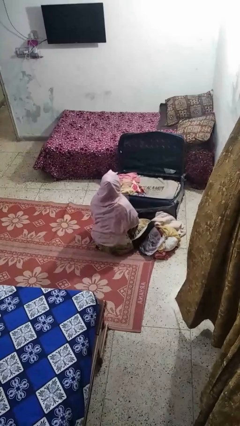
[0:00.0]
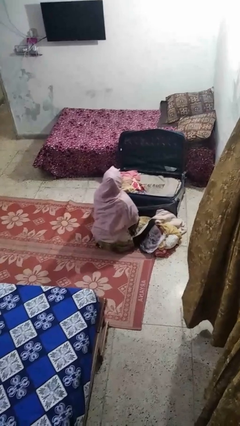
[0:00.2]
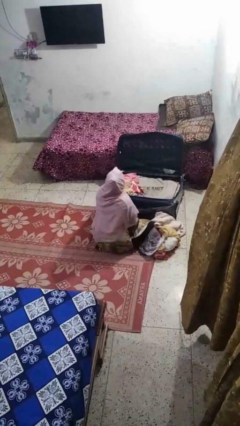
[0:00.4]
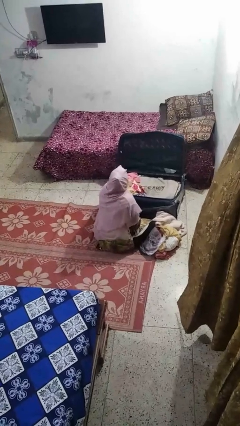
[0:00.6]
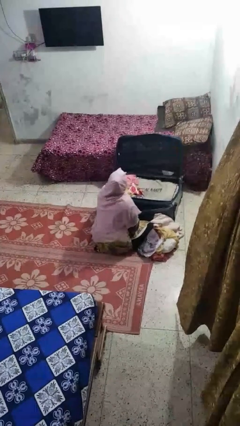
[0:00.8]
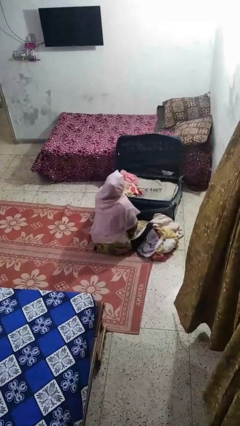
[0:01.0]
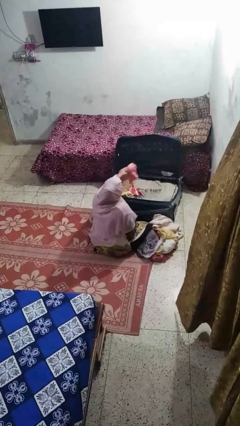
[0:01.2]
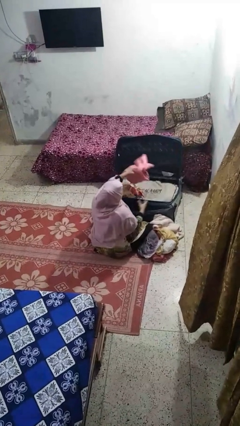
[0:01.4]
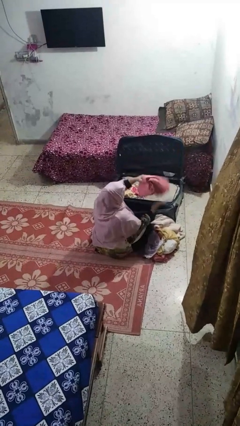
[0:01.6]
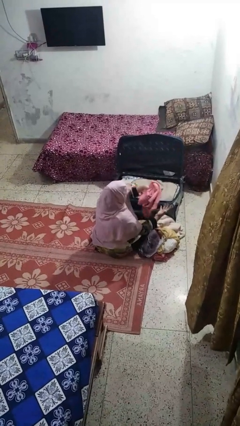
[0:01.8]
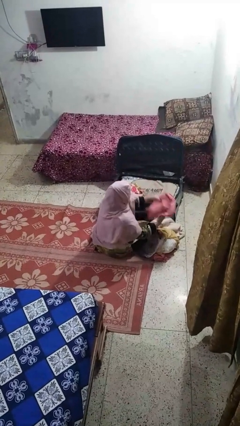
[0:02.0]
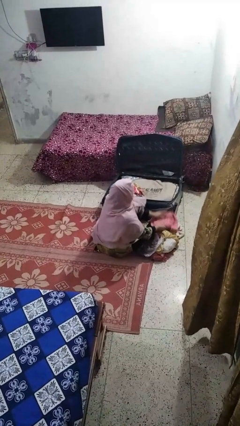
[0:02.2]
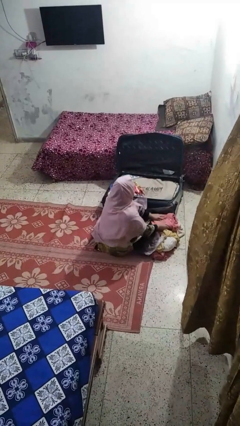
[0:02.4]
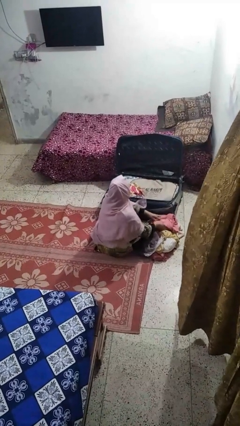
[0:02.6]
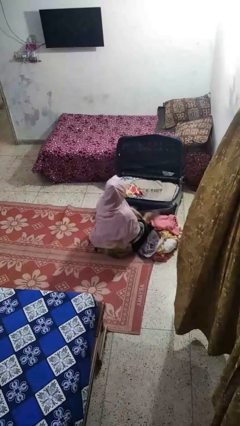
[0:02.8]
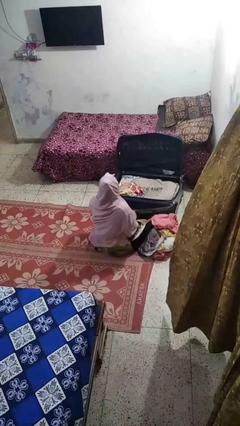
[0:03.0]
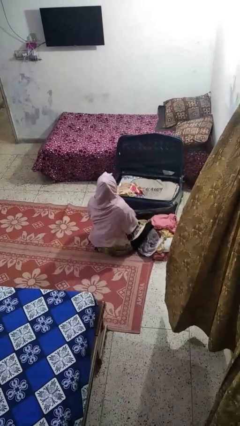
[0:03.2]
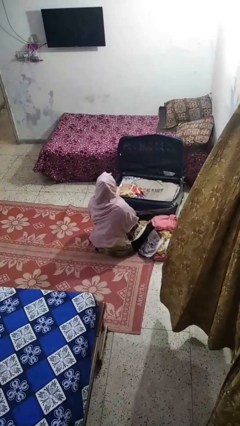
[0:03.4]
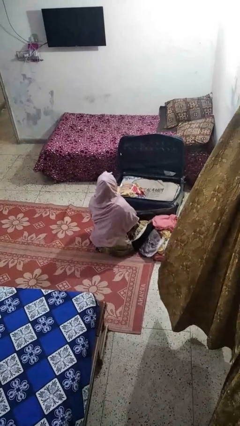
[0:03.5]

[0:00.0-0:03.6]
person unloads clothes from suitcase

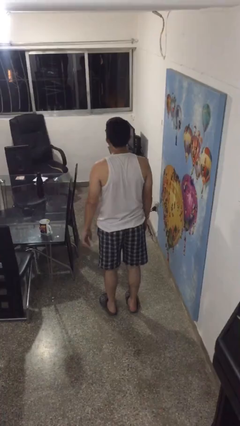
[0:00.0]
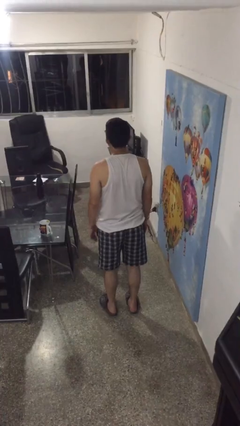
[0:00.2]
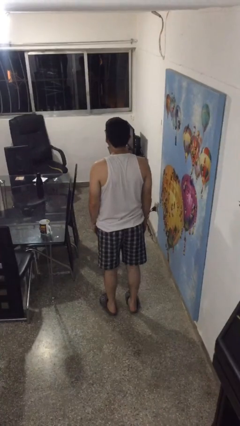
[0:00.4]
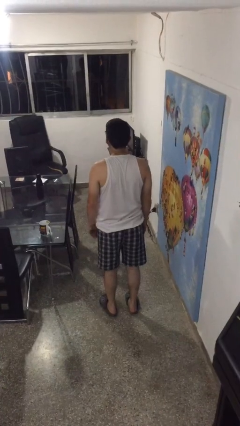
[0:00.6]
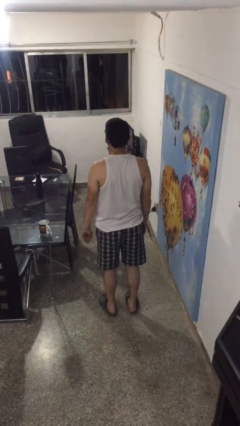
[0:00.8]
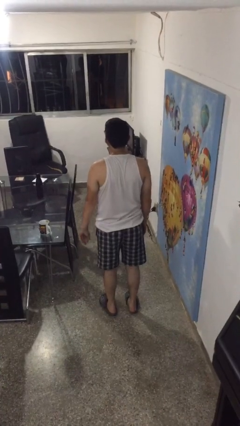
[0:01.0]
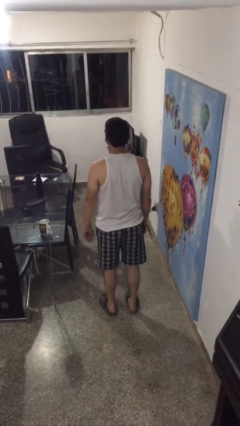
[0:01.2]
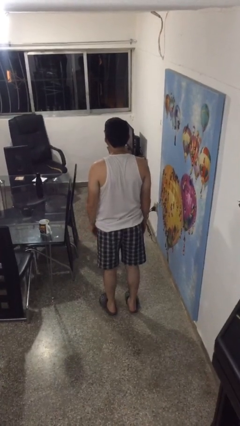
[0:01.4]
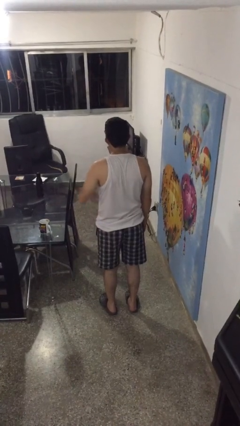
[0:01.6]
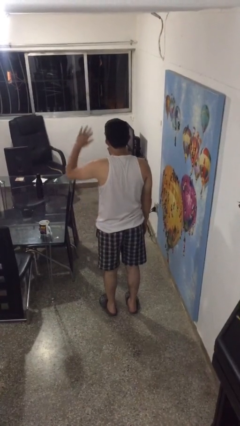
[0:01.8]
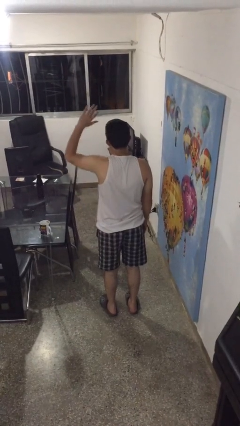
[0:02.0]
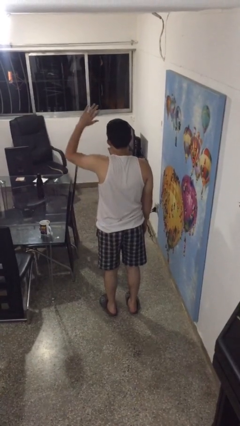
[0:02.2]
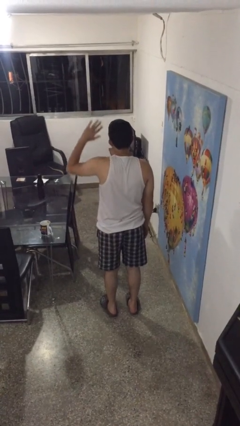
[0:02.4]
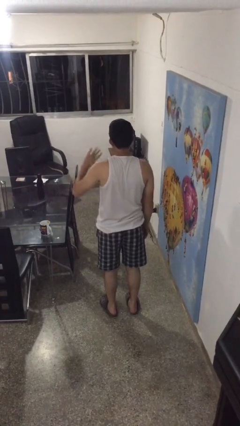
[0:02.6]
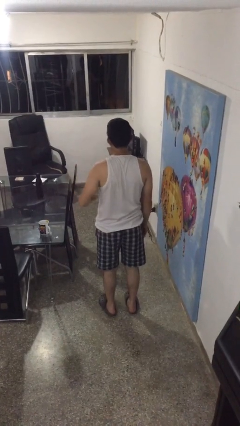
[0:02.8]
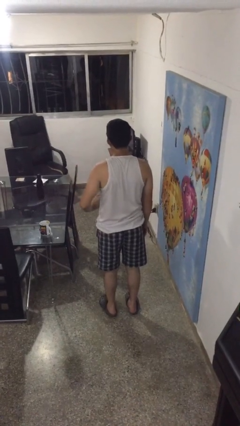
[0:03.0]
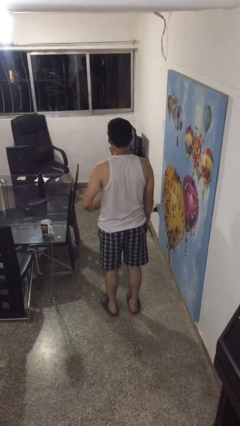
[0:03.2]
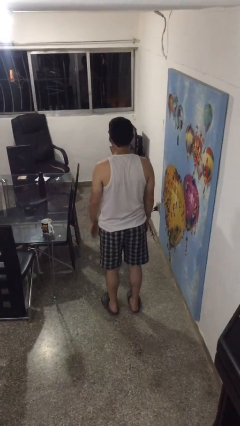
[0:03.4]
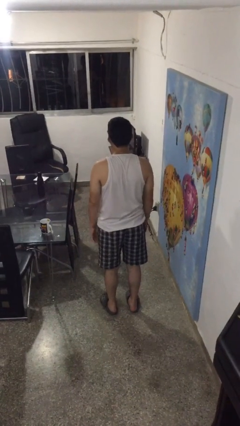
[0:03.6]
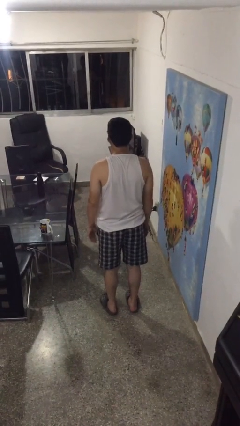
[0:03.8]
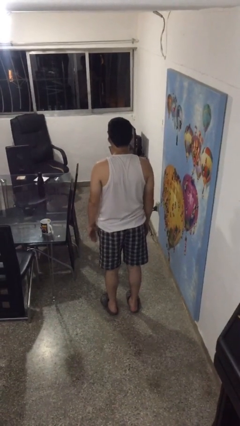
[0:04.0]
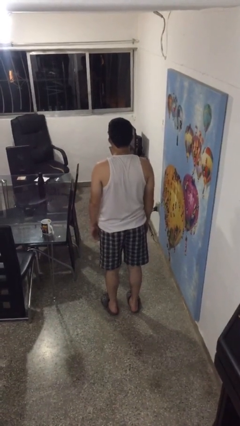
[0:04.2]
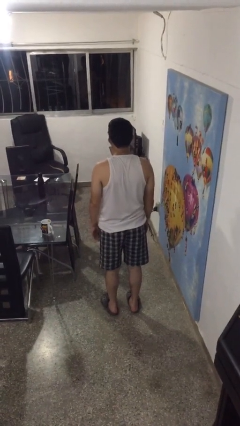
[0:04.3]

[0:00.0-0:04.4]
person gestures swipe down

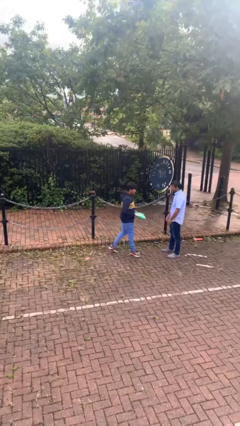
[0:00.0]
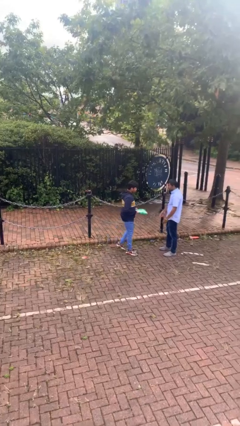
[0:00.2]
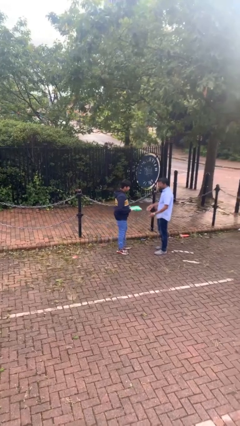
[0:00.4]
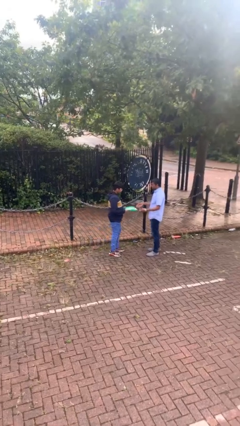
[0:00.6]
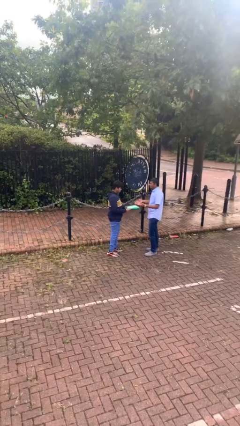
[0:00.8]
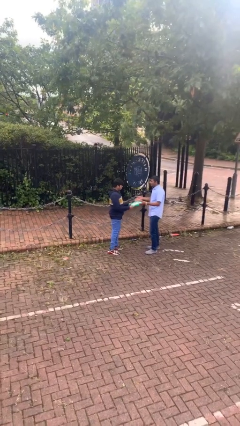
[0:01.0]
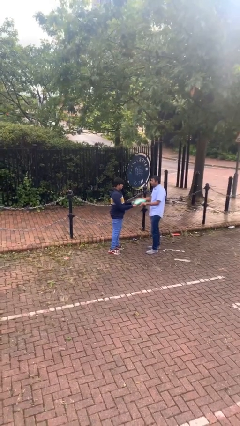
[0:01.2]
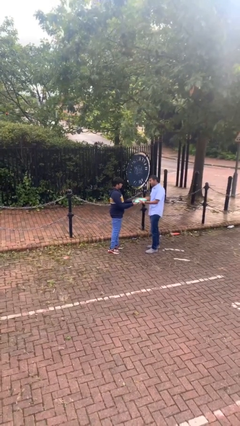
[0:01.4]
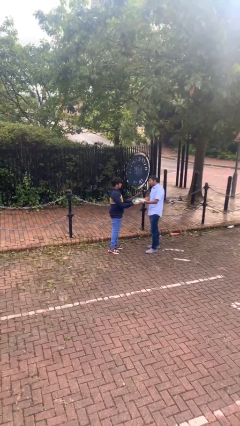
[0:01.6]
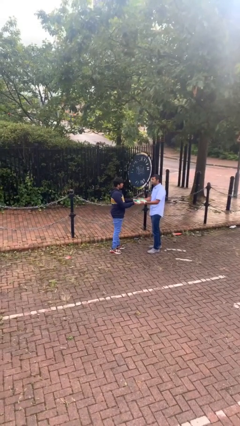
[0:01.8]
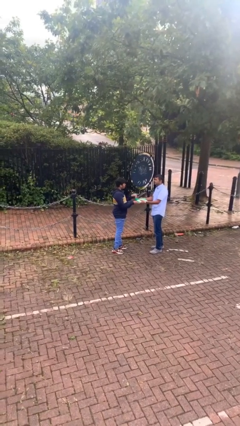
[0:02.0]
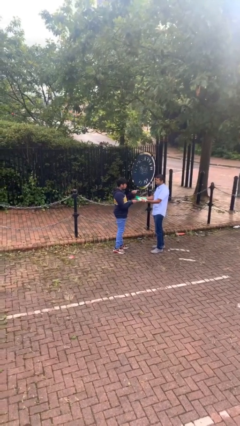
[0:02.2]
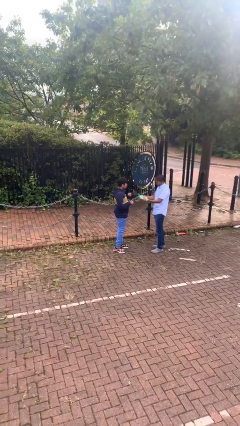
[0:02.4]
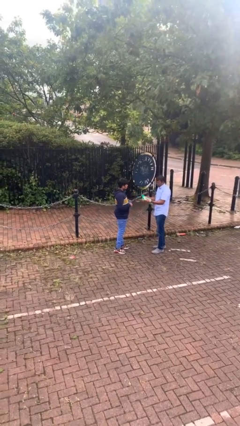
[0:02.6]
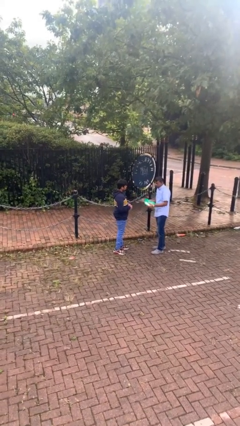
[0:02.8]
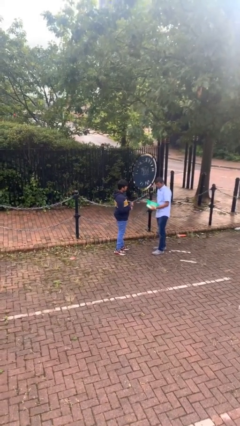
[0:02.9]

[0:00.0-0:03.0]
person transfers object to person

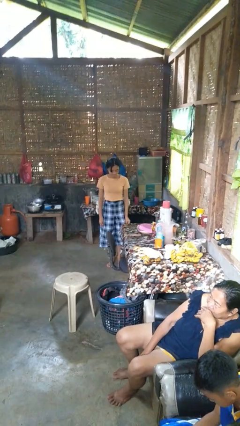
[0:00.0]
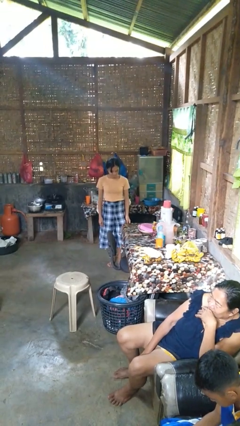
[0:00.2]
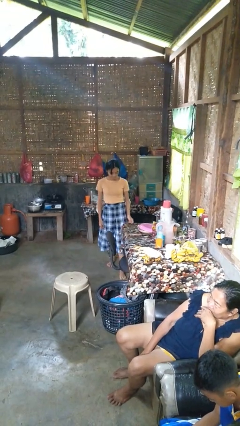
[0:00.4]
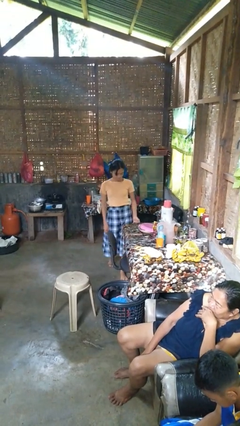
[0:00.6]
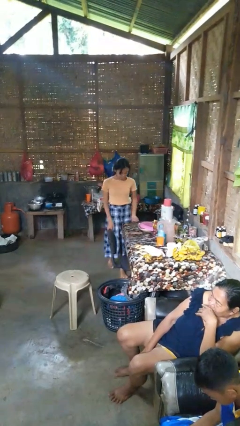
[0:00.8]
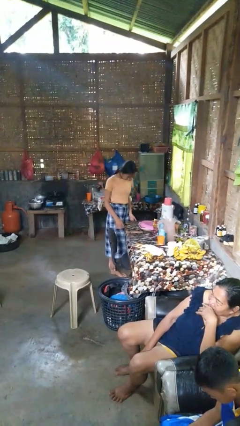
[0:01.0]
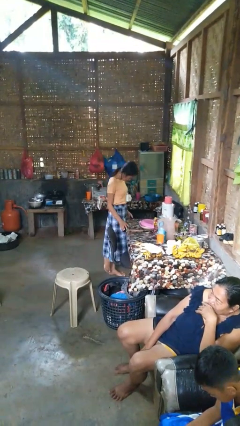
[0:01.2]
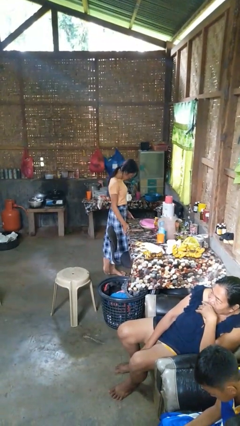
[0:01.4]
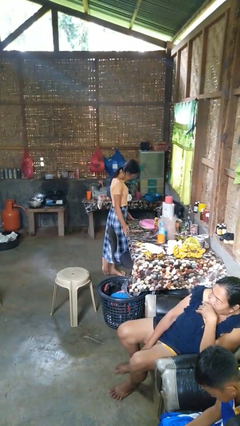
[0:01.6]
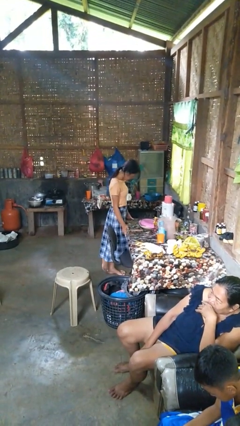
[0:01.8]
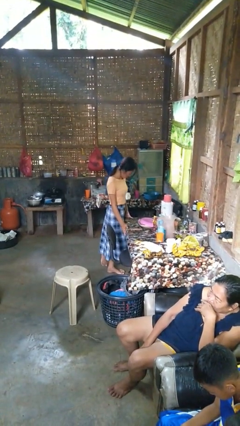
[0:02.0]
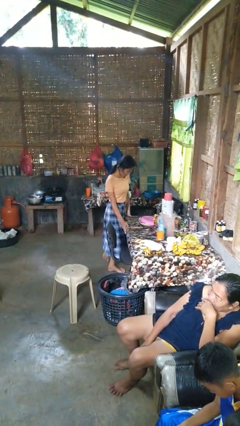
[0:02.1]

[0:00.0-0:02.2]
person bumps into table

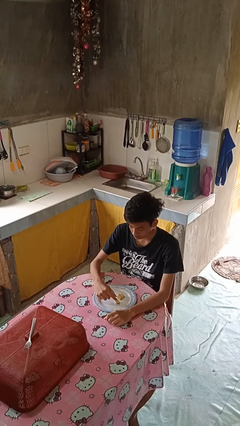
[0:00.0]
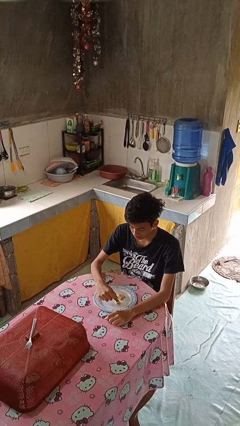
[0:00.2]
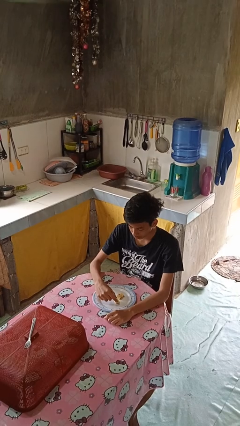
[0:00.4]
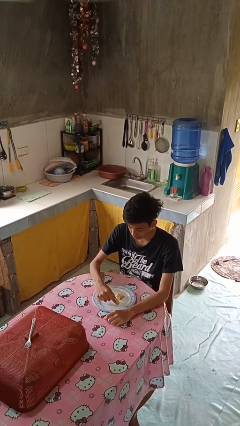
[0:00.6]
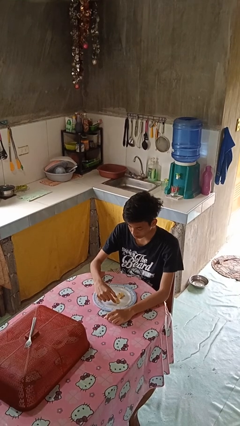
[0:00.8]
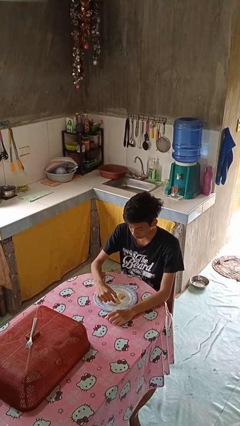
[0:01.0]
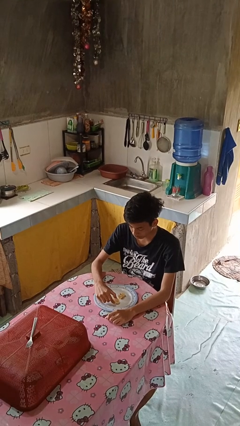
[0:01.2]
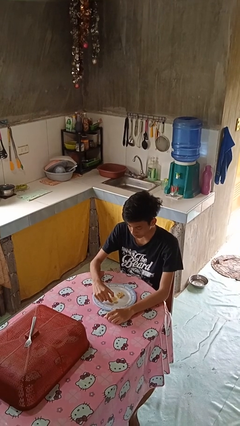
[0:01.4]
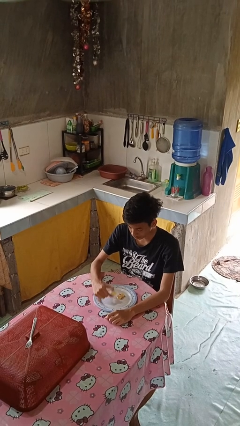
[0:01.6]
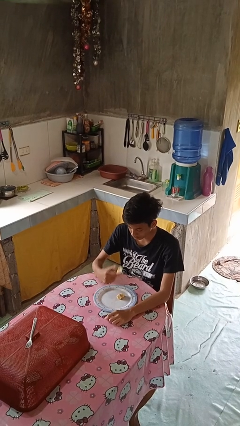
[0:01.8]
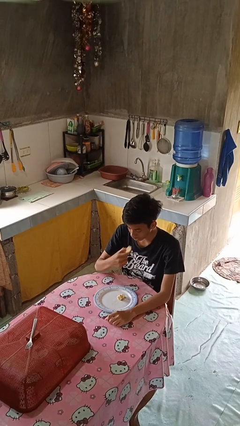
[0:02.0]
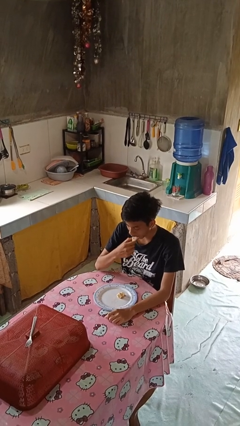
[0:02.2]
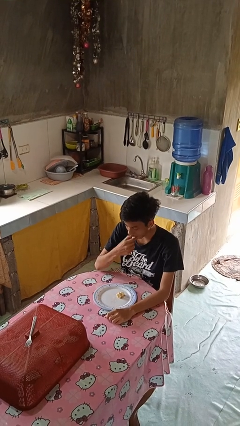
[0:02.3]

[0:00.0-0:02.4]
person eats with hands

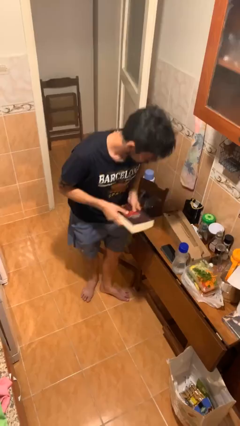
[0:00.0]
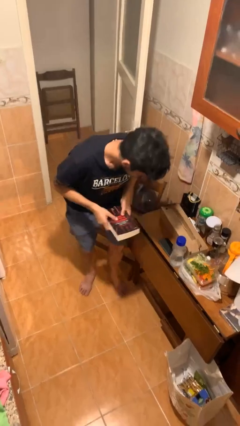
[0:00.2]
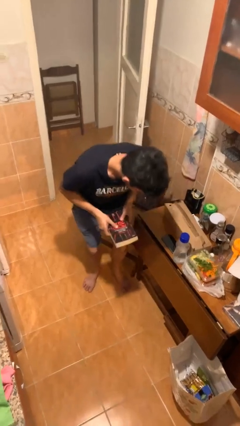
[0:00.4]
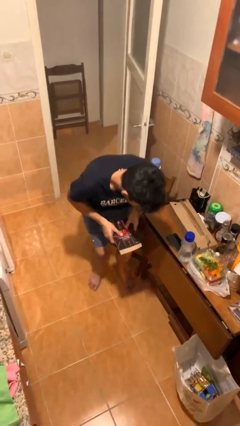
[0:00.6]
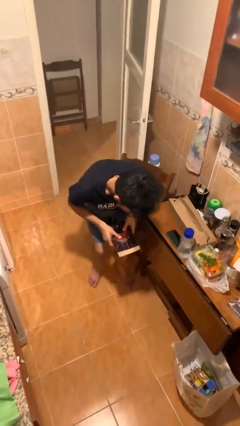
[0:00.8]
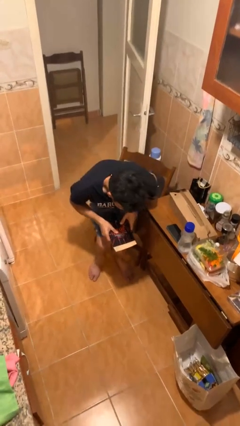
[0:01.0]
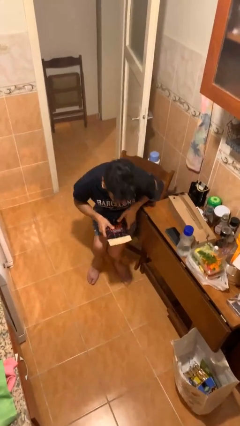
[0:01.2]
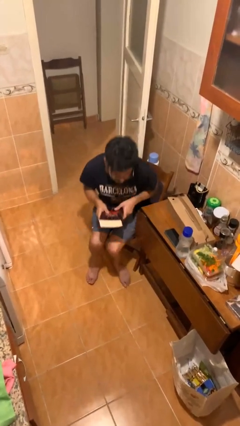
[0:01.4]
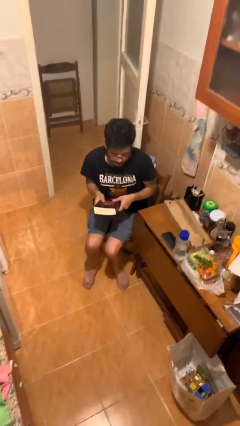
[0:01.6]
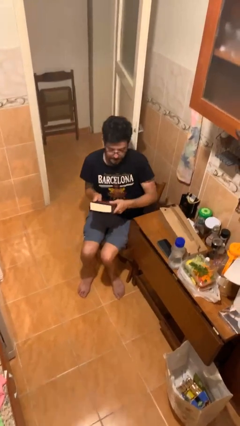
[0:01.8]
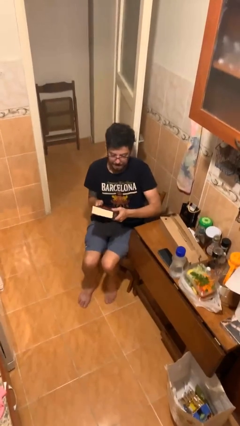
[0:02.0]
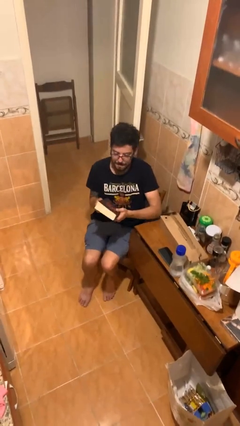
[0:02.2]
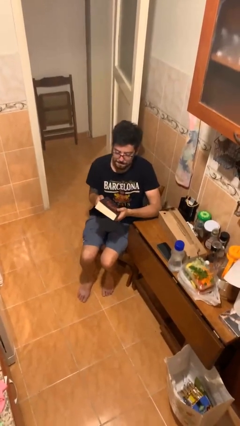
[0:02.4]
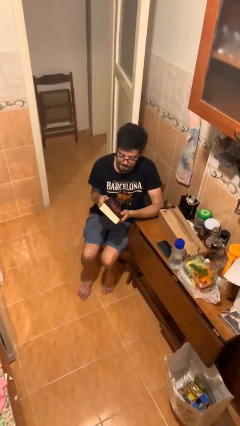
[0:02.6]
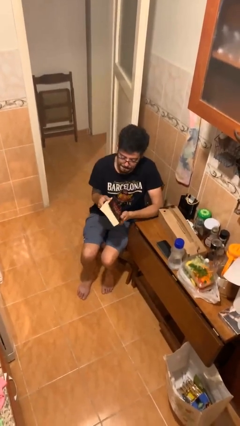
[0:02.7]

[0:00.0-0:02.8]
person sits down
